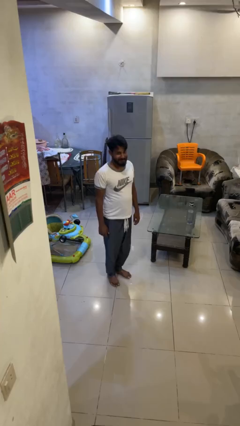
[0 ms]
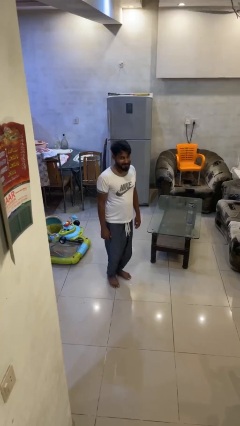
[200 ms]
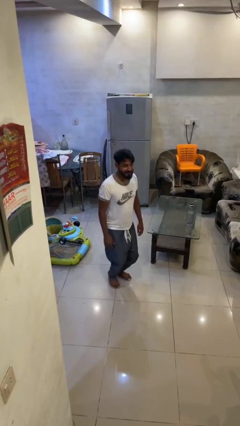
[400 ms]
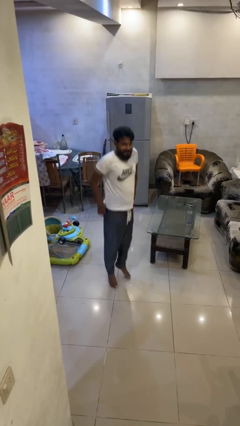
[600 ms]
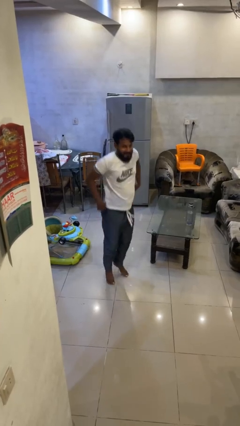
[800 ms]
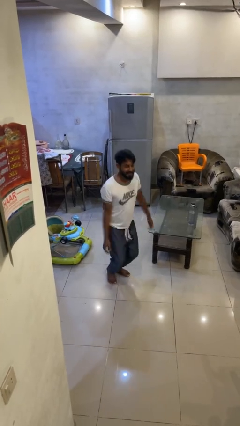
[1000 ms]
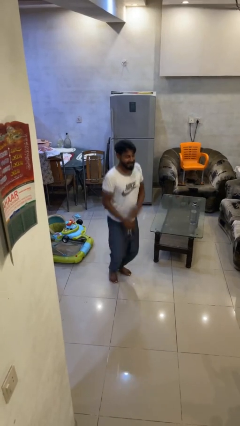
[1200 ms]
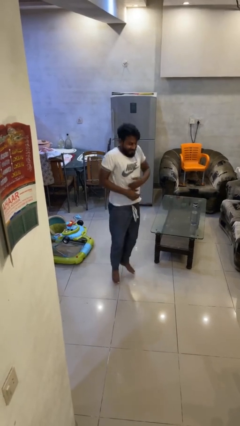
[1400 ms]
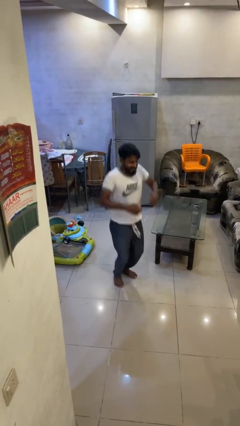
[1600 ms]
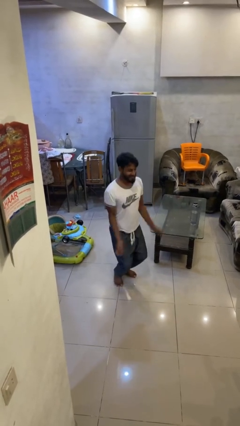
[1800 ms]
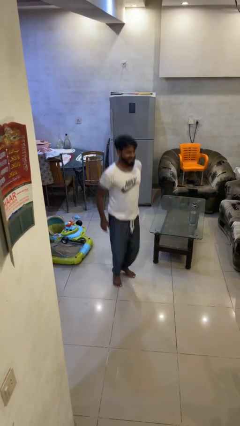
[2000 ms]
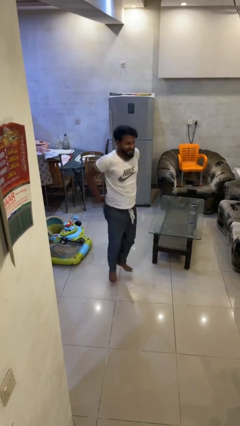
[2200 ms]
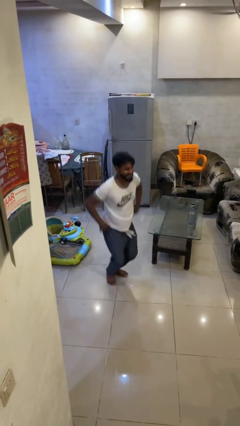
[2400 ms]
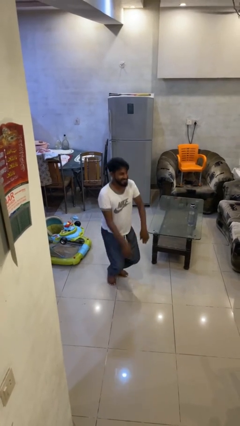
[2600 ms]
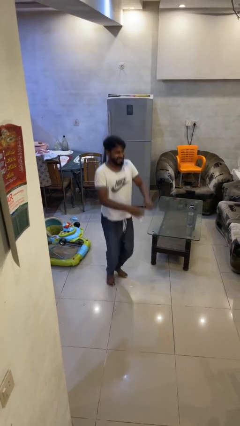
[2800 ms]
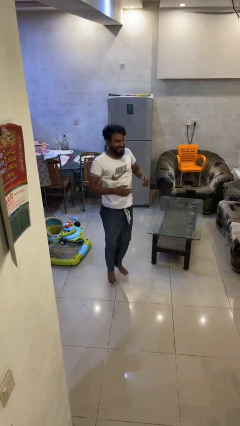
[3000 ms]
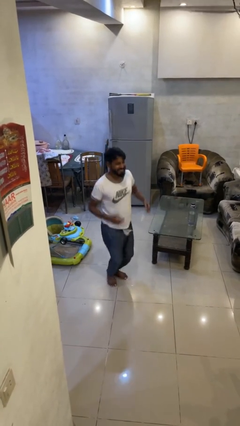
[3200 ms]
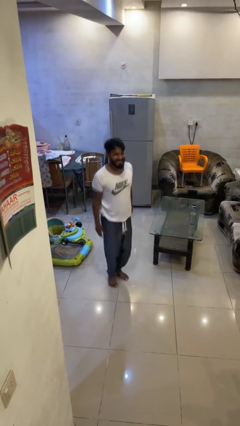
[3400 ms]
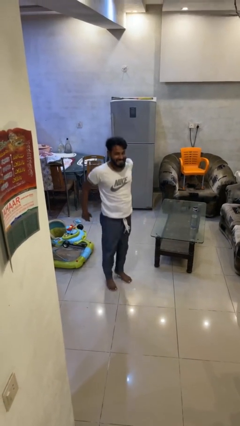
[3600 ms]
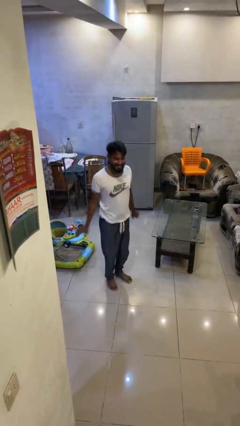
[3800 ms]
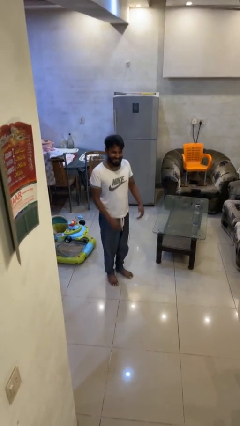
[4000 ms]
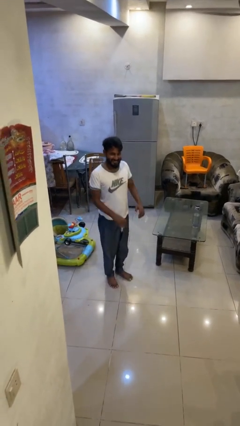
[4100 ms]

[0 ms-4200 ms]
person jumps

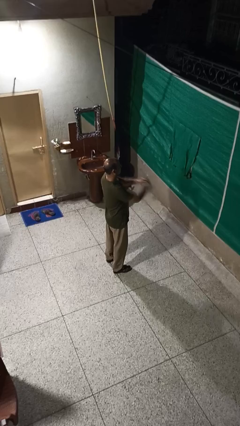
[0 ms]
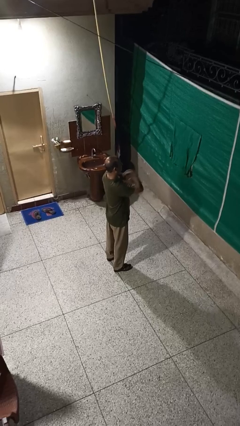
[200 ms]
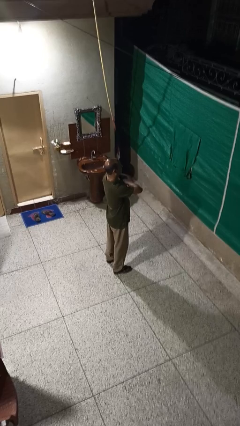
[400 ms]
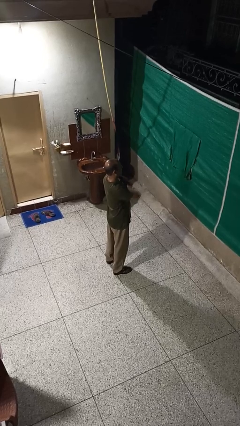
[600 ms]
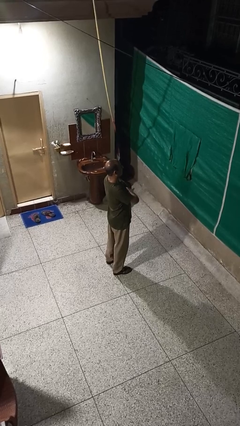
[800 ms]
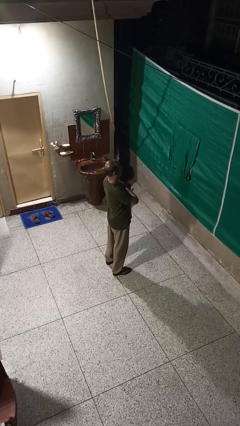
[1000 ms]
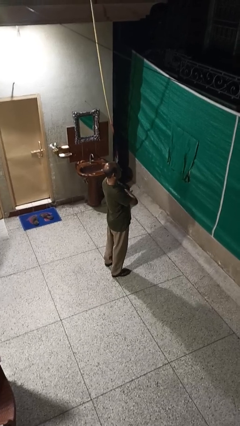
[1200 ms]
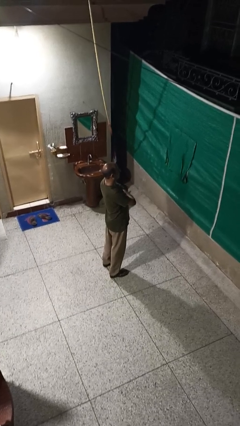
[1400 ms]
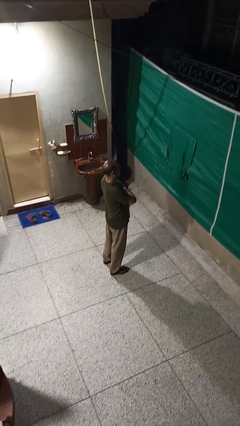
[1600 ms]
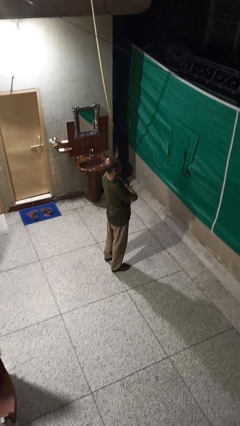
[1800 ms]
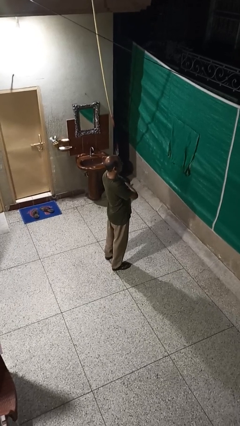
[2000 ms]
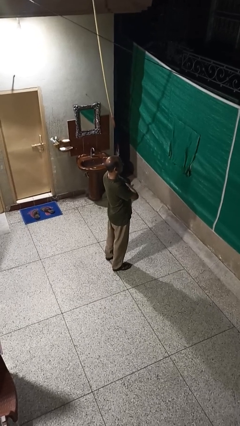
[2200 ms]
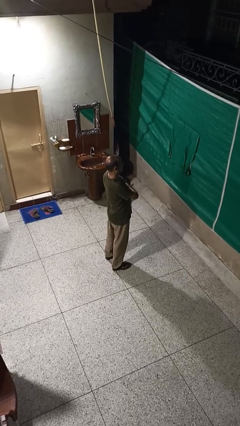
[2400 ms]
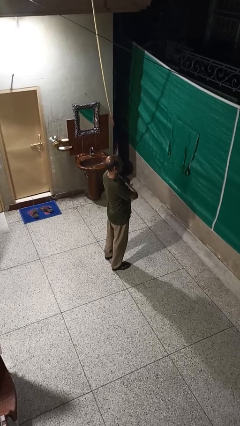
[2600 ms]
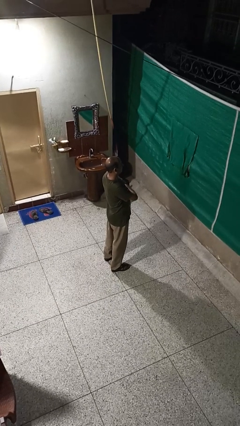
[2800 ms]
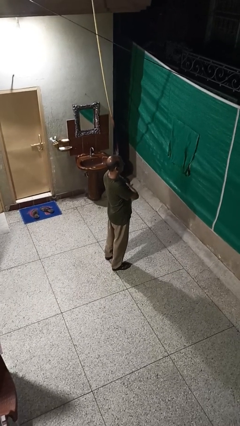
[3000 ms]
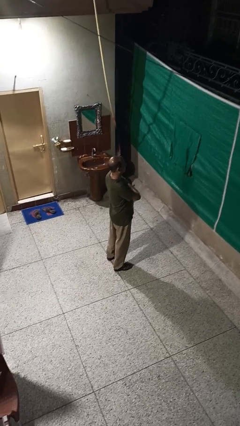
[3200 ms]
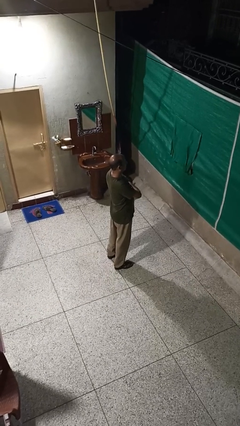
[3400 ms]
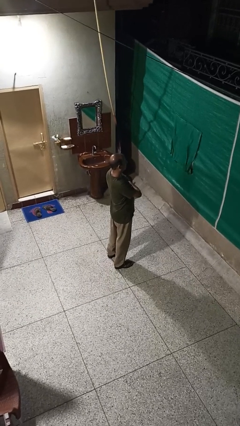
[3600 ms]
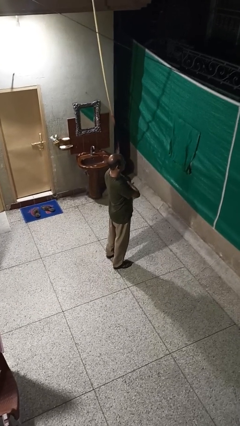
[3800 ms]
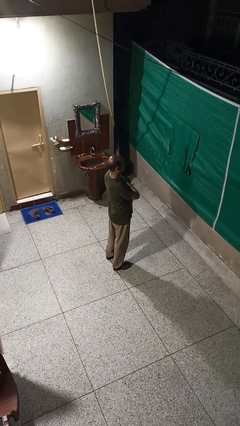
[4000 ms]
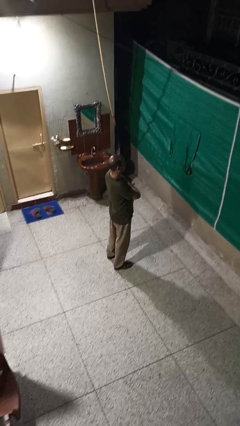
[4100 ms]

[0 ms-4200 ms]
person crosses arms

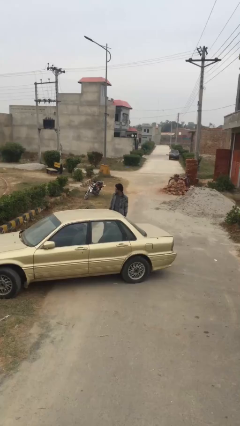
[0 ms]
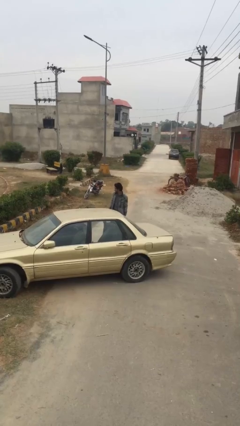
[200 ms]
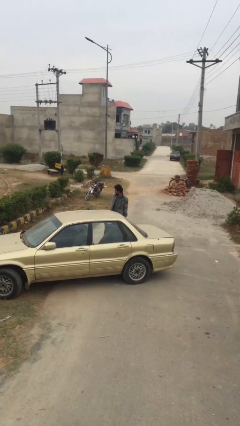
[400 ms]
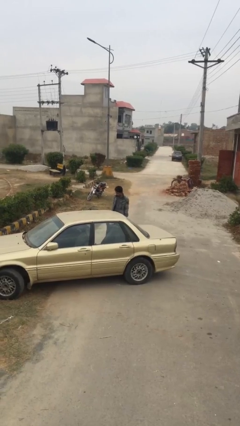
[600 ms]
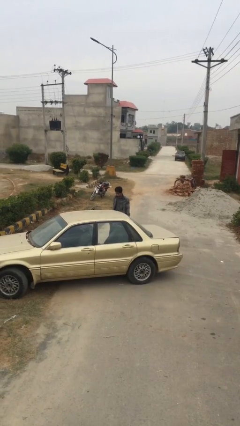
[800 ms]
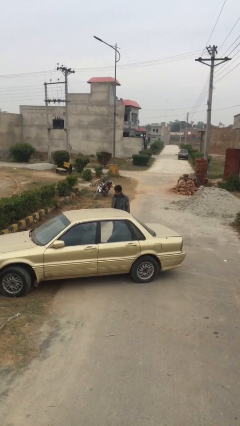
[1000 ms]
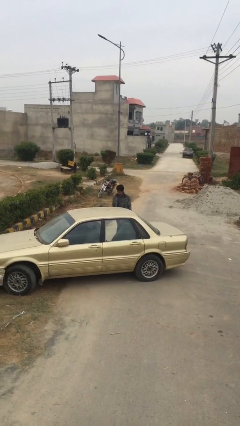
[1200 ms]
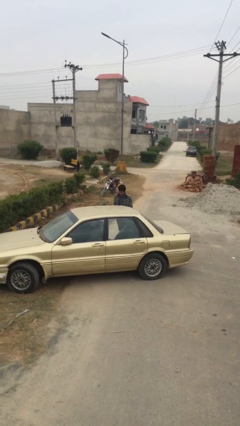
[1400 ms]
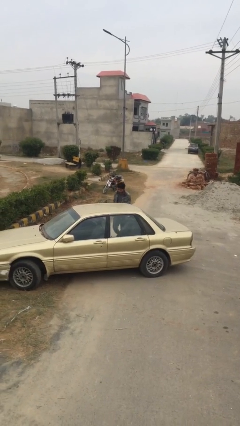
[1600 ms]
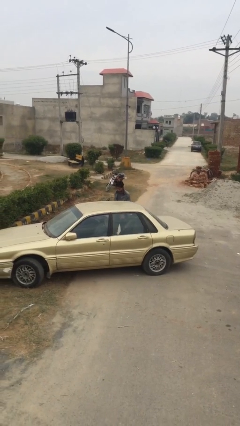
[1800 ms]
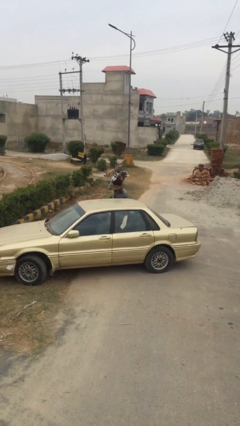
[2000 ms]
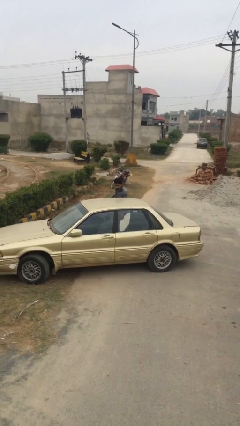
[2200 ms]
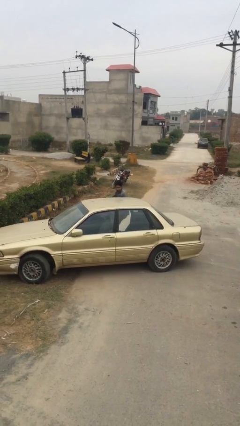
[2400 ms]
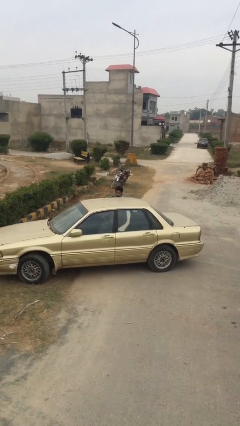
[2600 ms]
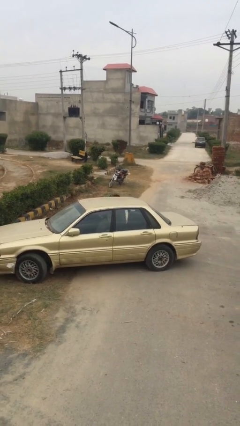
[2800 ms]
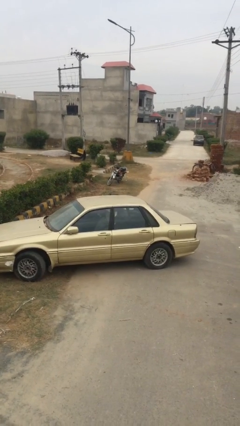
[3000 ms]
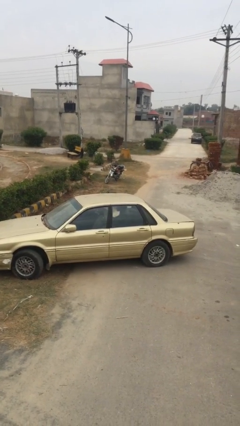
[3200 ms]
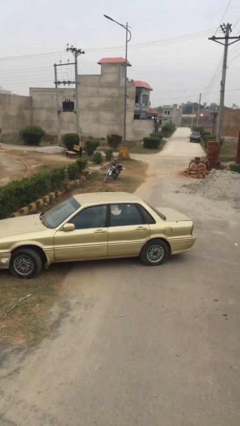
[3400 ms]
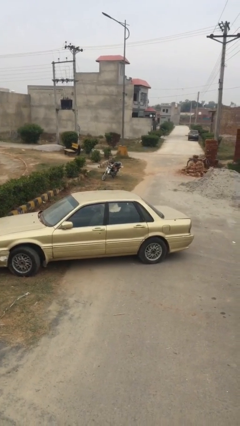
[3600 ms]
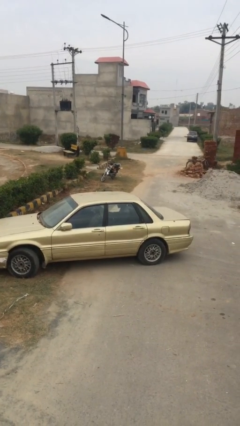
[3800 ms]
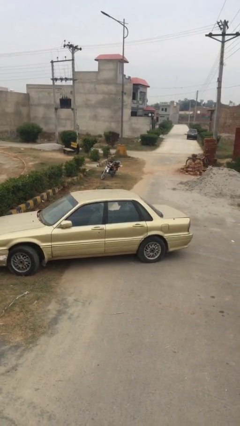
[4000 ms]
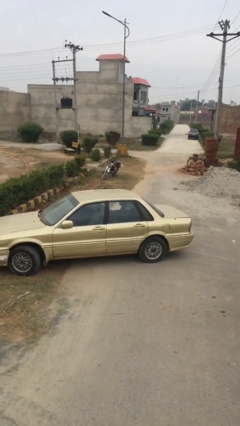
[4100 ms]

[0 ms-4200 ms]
person enters car

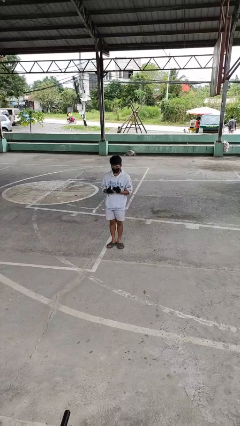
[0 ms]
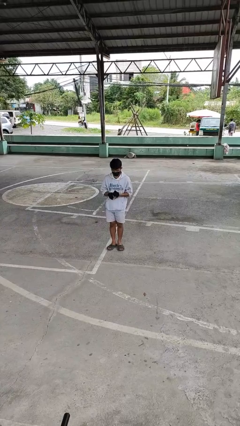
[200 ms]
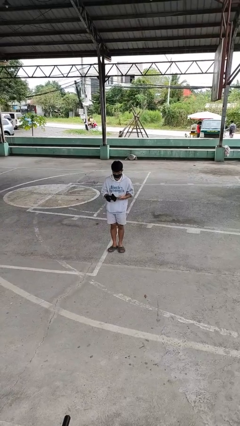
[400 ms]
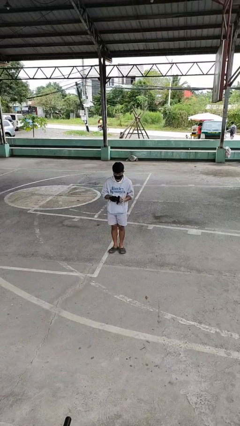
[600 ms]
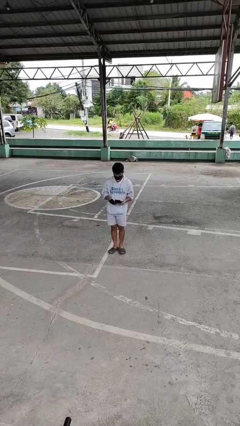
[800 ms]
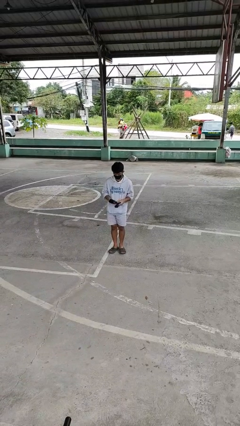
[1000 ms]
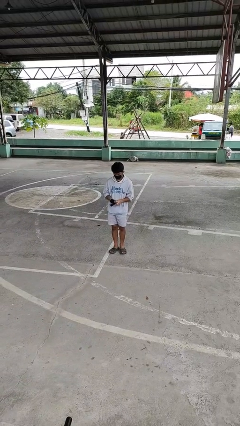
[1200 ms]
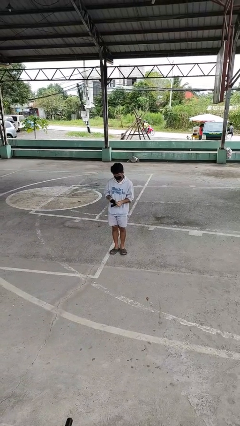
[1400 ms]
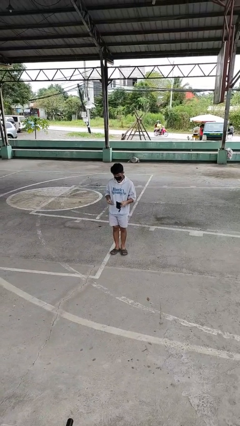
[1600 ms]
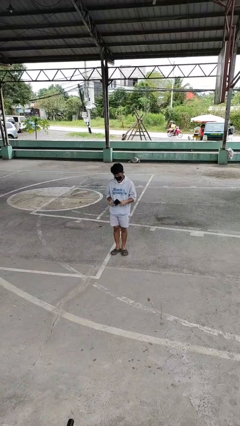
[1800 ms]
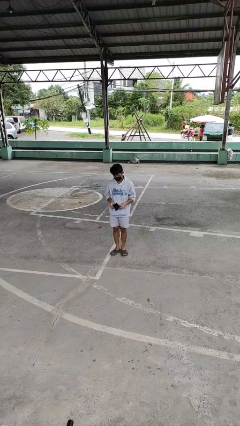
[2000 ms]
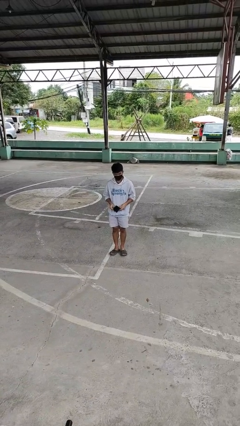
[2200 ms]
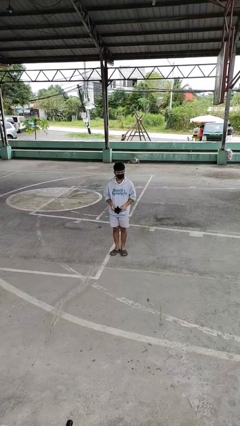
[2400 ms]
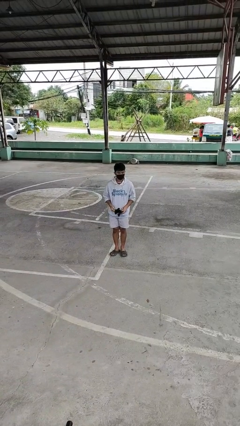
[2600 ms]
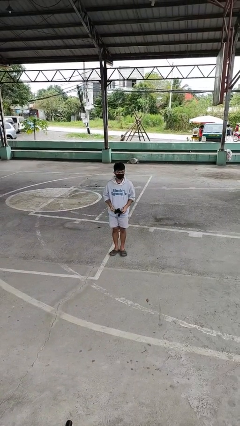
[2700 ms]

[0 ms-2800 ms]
person takes off gloves

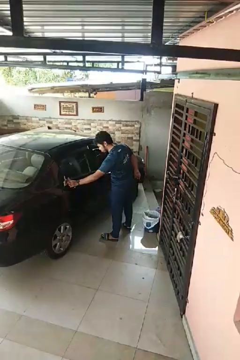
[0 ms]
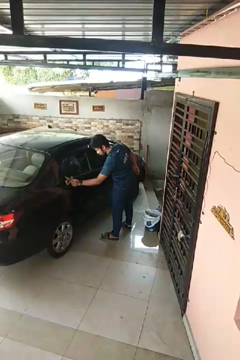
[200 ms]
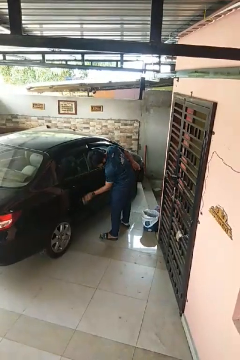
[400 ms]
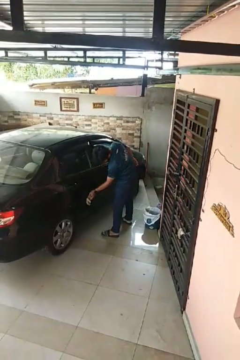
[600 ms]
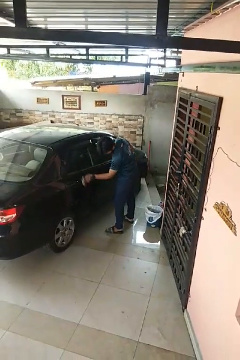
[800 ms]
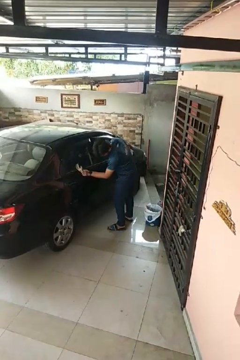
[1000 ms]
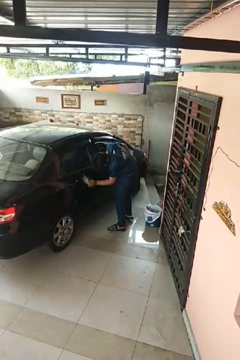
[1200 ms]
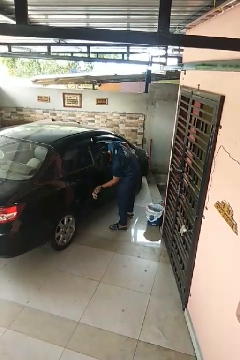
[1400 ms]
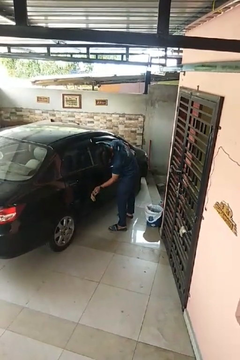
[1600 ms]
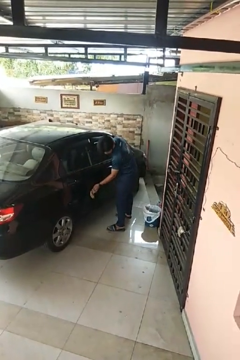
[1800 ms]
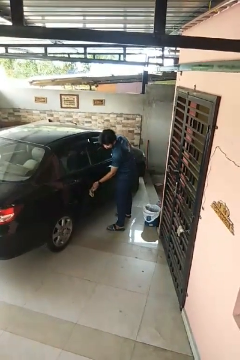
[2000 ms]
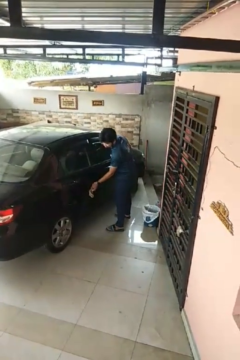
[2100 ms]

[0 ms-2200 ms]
person polishes car with rag

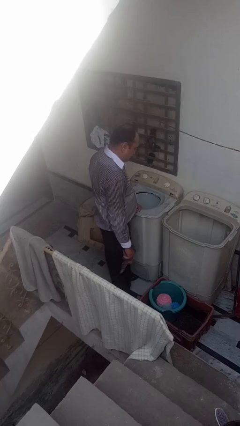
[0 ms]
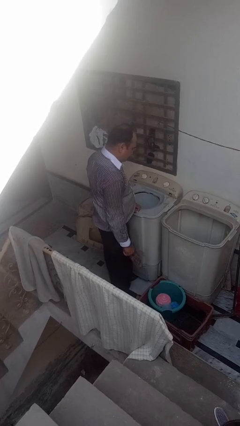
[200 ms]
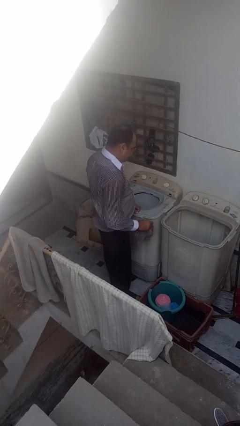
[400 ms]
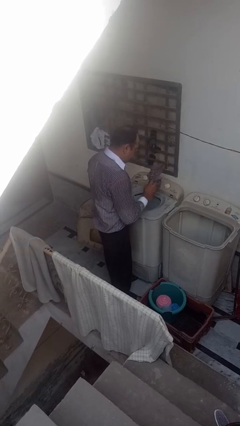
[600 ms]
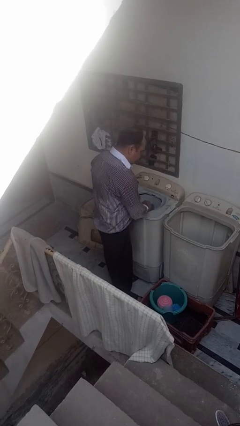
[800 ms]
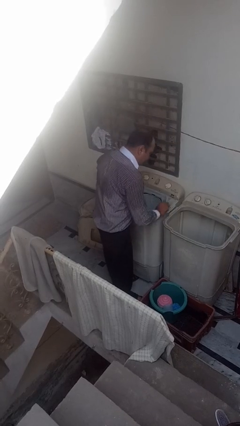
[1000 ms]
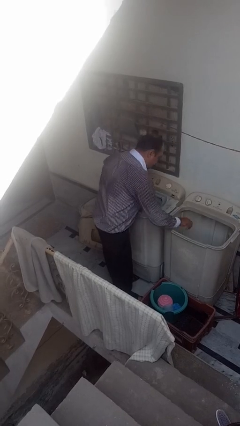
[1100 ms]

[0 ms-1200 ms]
person loads dryer
